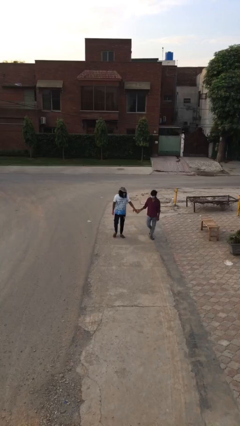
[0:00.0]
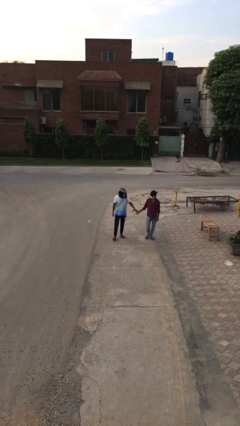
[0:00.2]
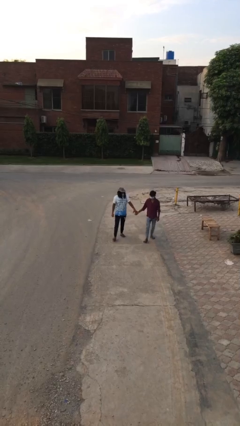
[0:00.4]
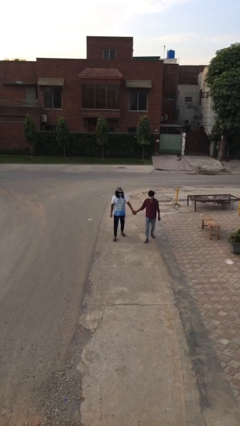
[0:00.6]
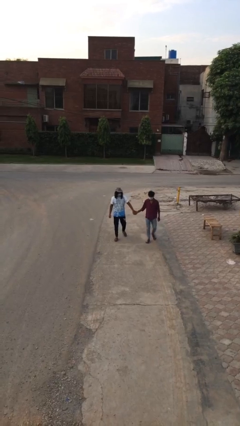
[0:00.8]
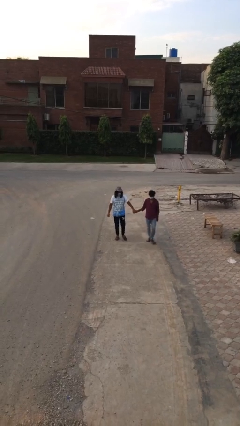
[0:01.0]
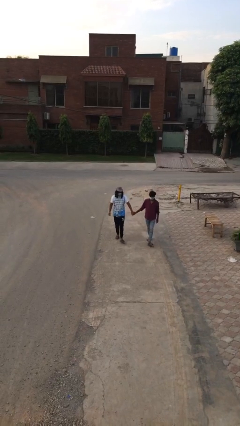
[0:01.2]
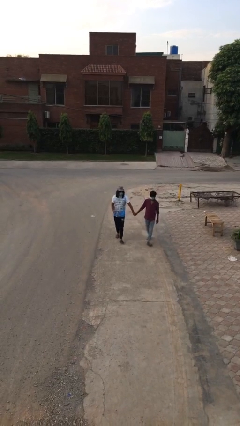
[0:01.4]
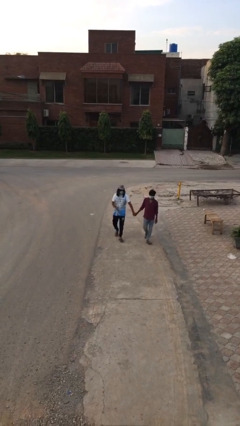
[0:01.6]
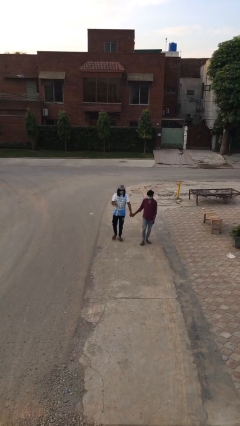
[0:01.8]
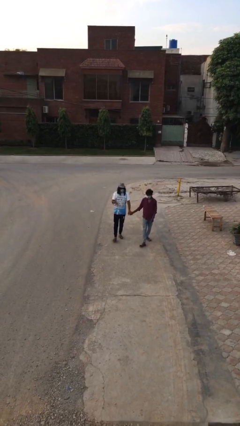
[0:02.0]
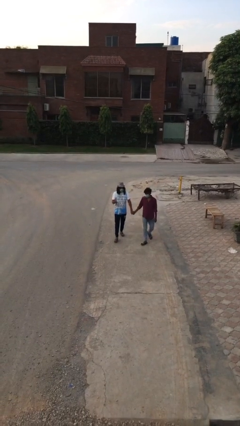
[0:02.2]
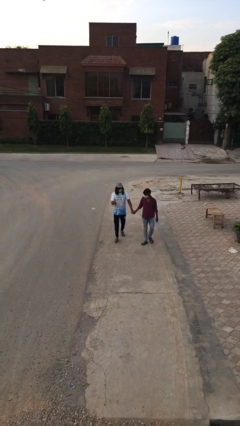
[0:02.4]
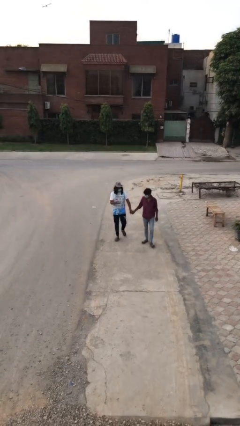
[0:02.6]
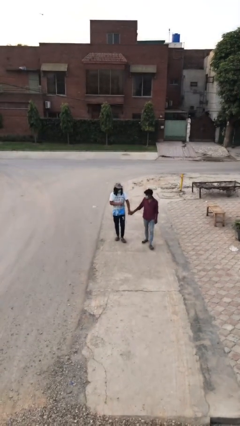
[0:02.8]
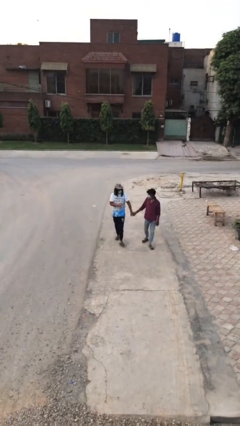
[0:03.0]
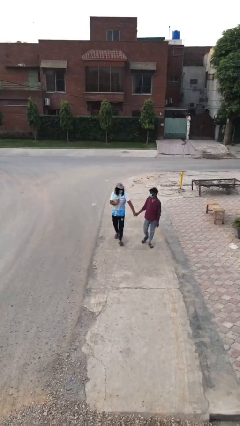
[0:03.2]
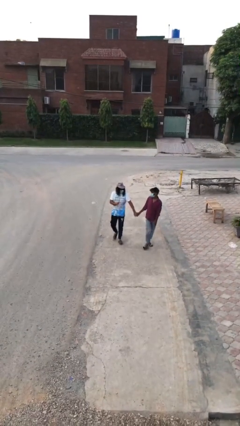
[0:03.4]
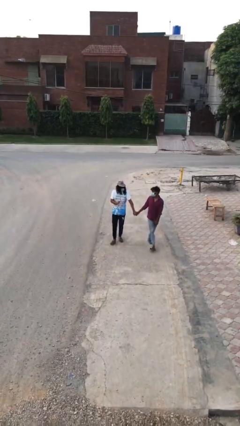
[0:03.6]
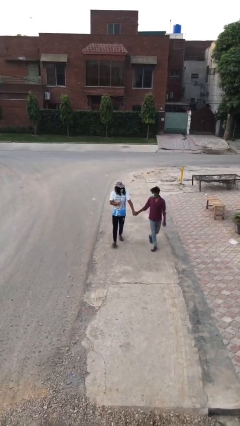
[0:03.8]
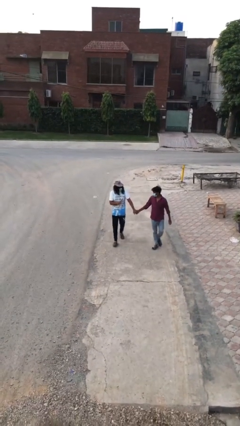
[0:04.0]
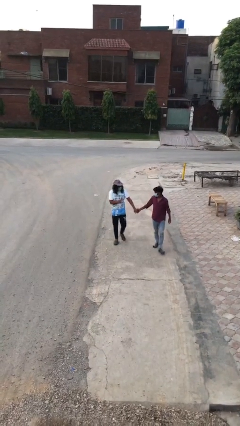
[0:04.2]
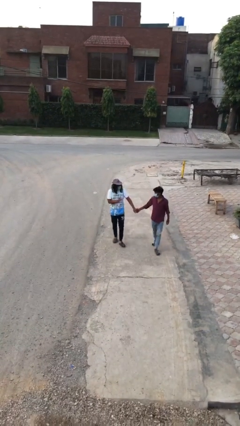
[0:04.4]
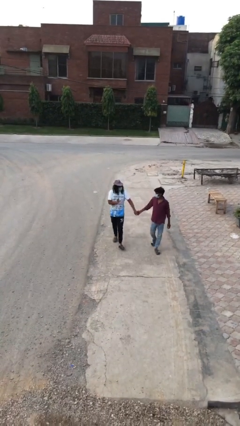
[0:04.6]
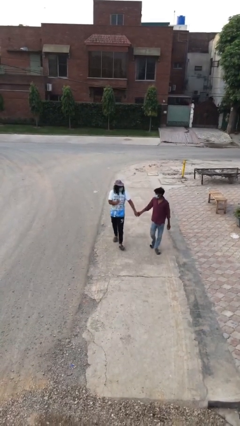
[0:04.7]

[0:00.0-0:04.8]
person holds hand

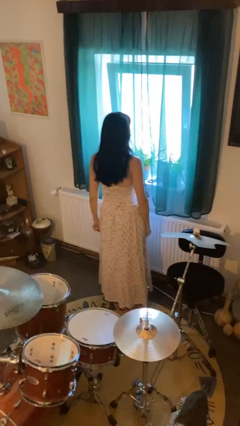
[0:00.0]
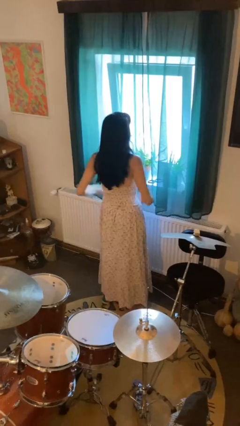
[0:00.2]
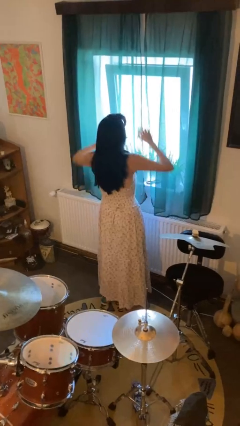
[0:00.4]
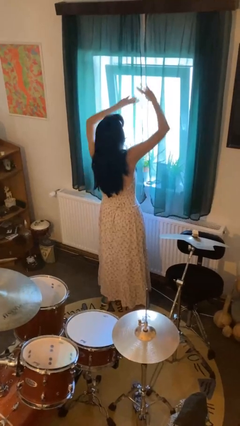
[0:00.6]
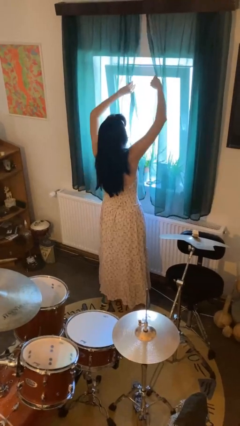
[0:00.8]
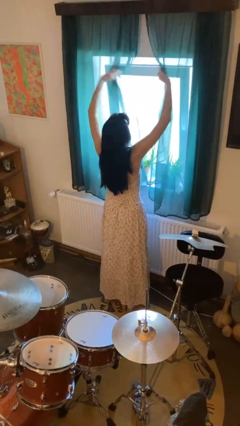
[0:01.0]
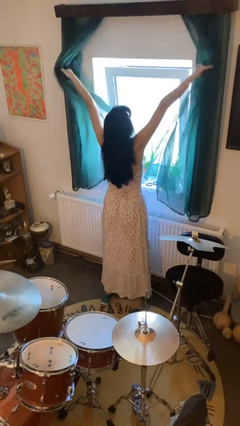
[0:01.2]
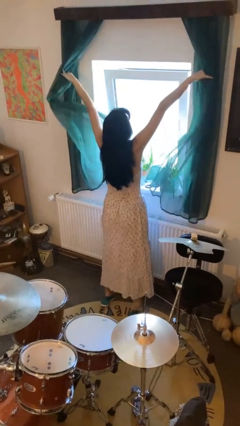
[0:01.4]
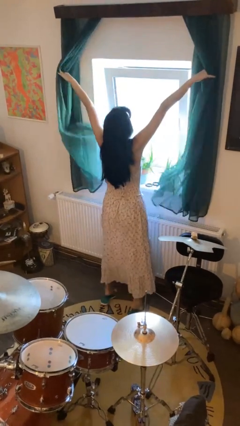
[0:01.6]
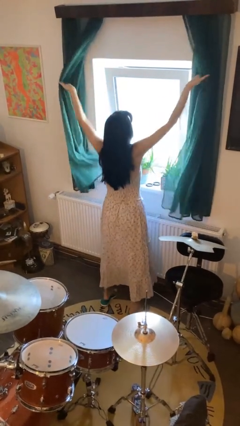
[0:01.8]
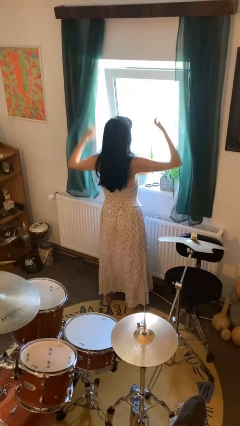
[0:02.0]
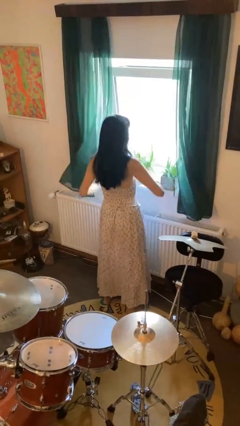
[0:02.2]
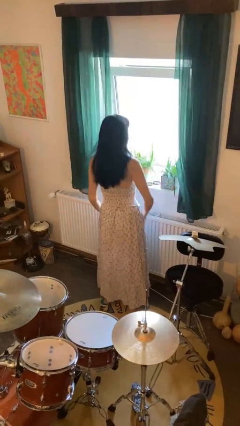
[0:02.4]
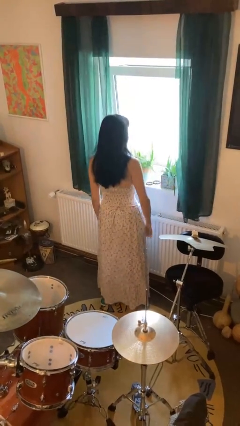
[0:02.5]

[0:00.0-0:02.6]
person opens curtains

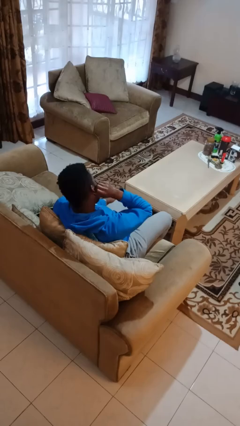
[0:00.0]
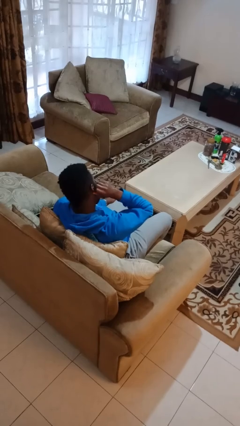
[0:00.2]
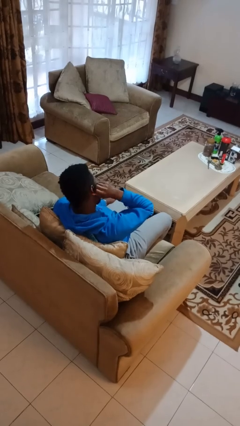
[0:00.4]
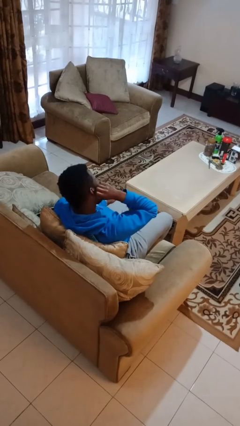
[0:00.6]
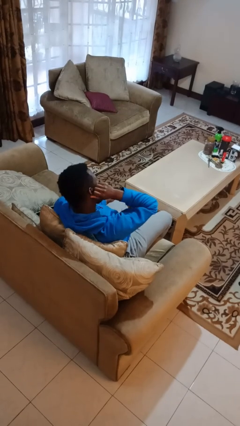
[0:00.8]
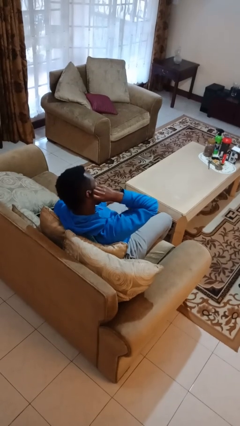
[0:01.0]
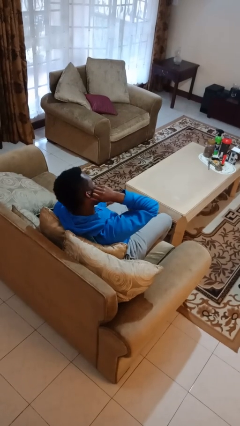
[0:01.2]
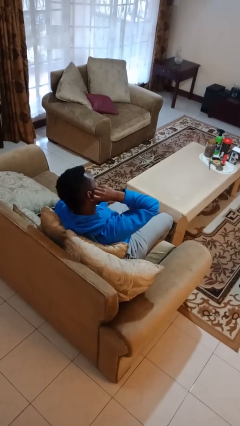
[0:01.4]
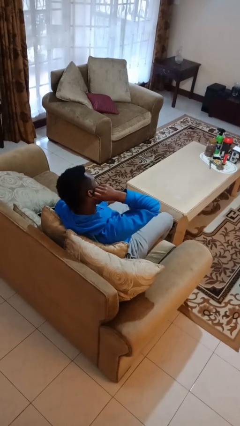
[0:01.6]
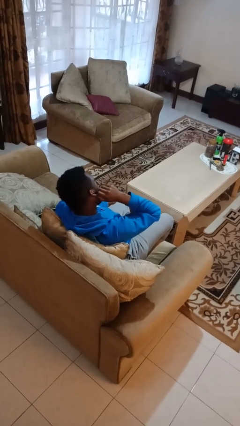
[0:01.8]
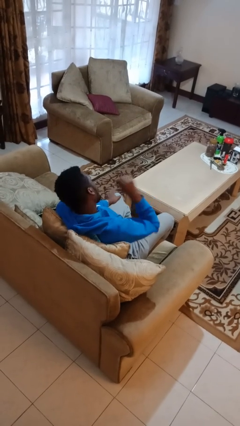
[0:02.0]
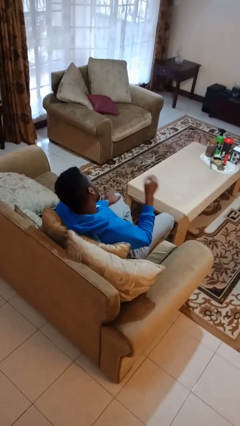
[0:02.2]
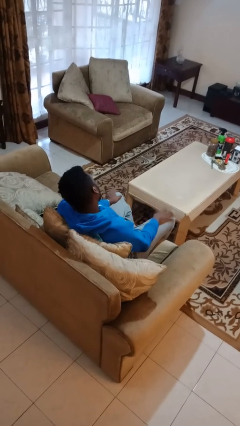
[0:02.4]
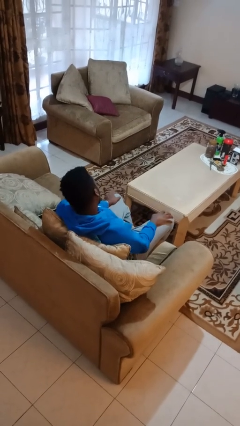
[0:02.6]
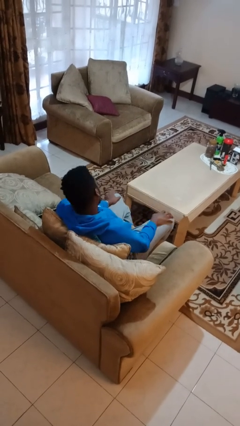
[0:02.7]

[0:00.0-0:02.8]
person touches earlobe

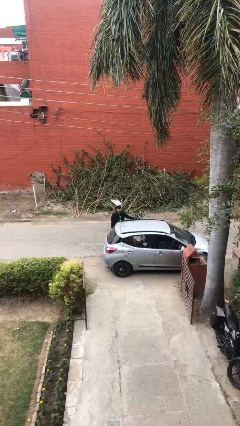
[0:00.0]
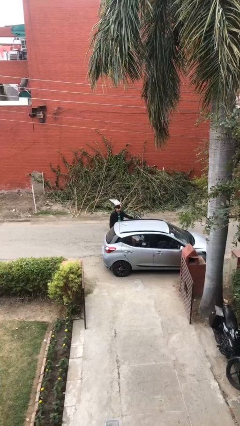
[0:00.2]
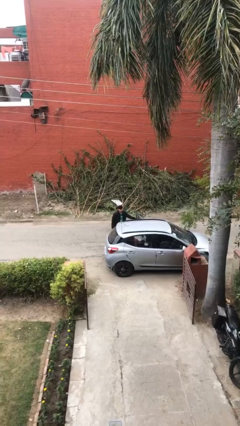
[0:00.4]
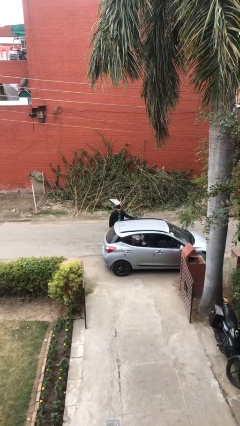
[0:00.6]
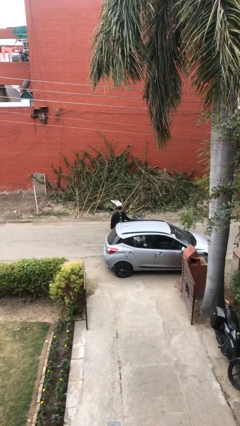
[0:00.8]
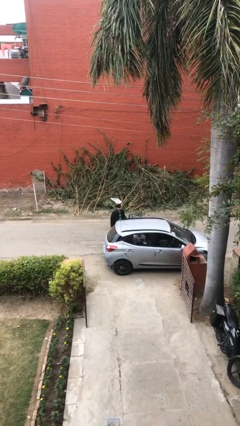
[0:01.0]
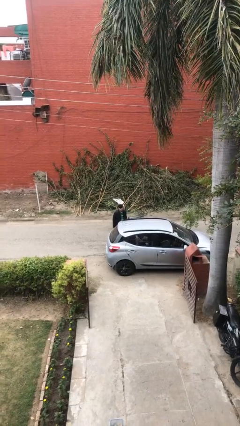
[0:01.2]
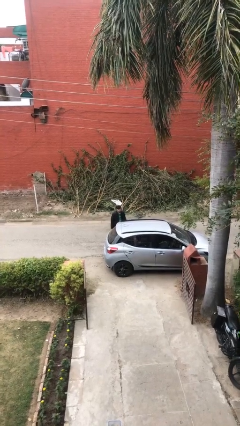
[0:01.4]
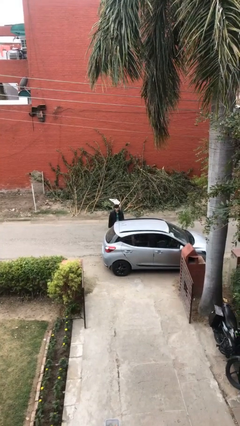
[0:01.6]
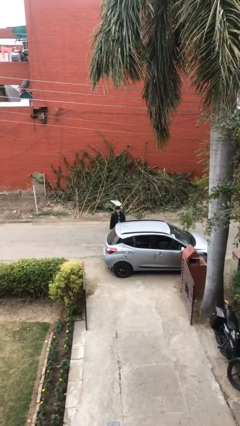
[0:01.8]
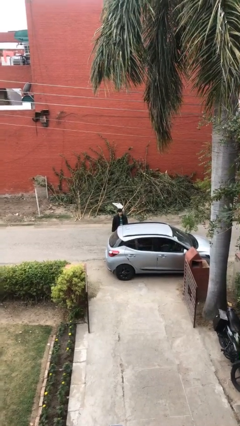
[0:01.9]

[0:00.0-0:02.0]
person closes car door

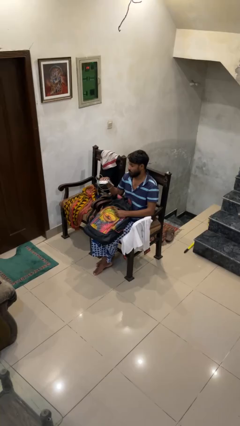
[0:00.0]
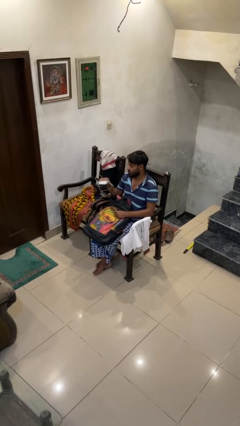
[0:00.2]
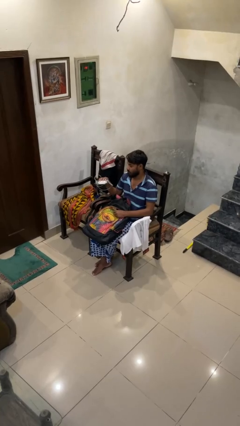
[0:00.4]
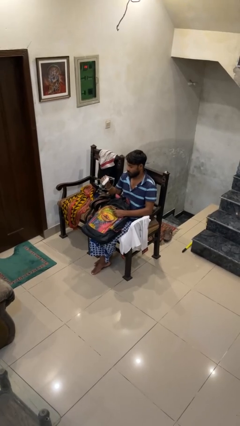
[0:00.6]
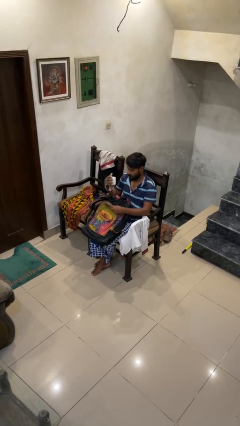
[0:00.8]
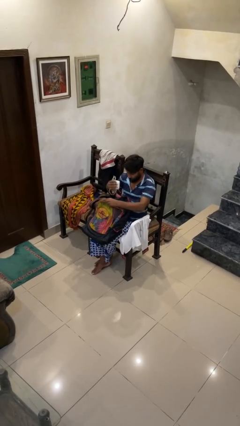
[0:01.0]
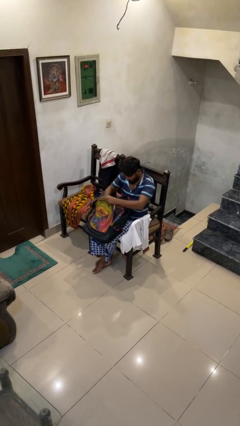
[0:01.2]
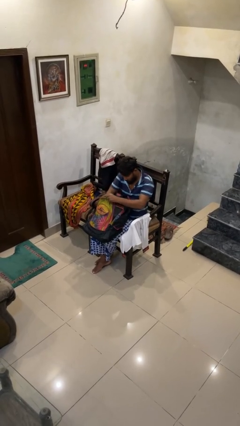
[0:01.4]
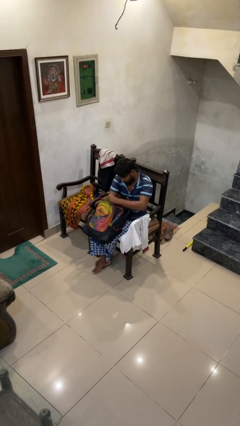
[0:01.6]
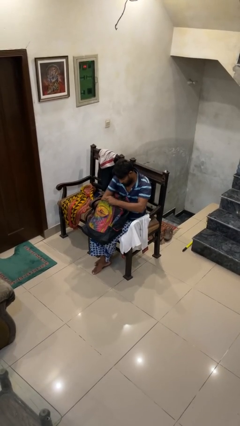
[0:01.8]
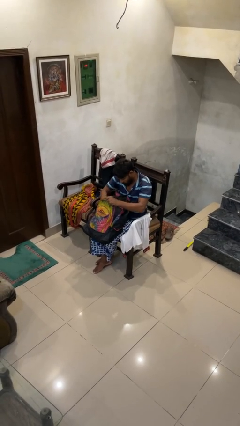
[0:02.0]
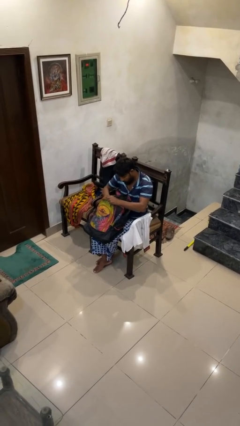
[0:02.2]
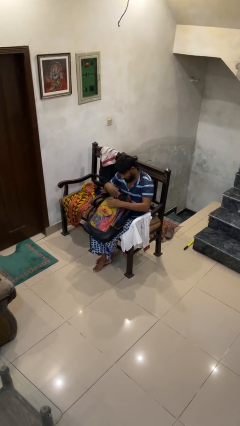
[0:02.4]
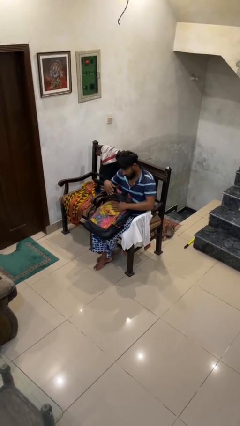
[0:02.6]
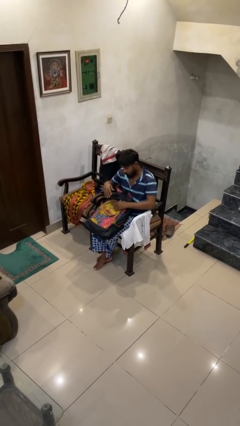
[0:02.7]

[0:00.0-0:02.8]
person puts object into backpack

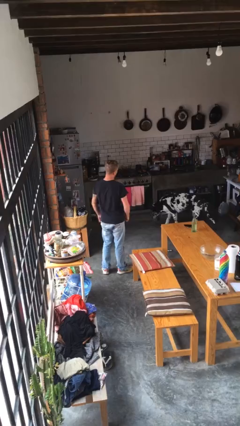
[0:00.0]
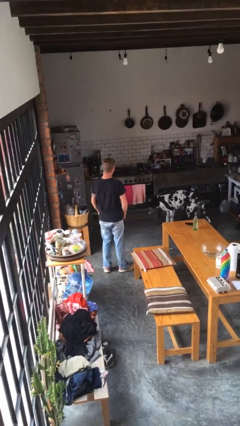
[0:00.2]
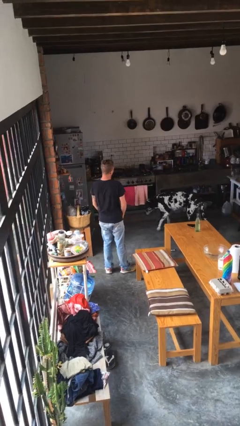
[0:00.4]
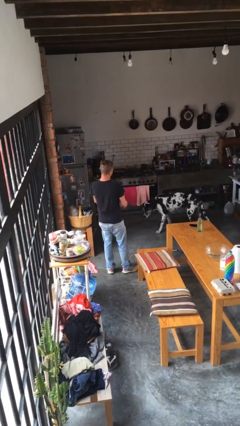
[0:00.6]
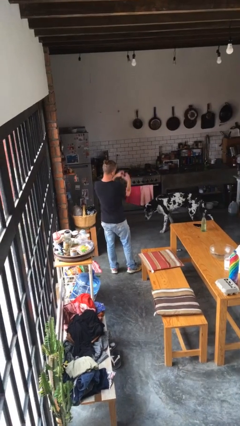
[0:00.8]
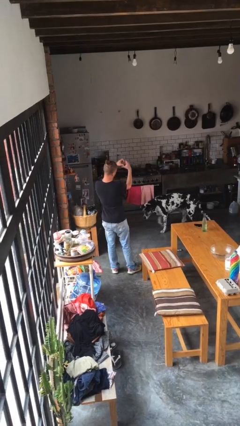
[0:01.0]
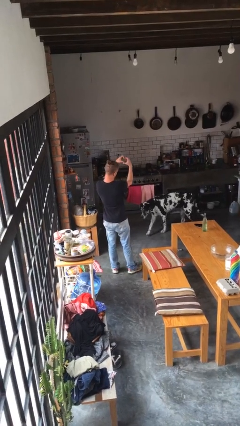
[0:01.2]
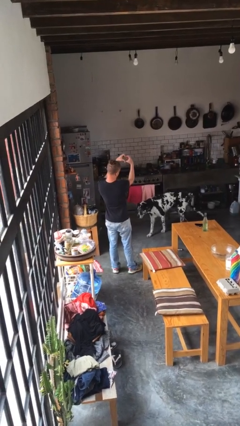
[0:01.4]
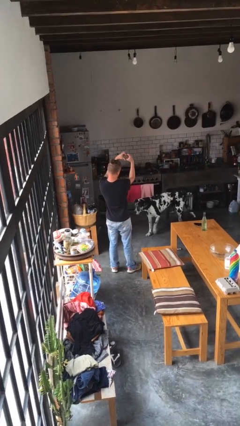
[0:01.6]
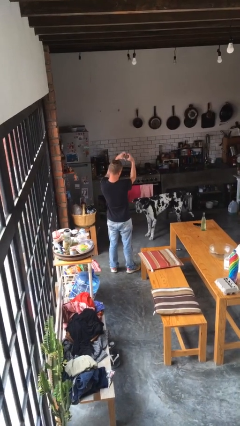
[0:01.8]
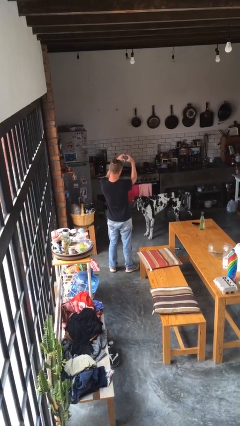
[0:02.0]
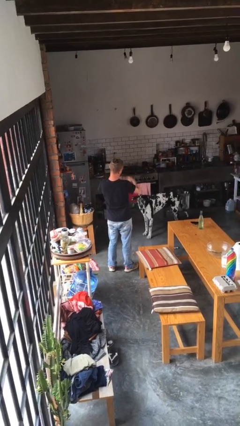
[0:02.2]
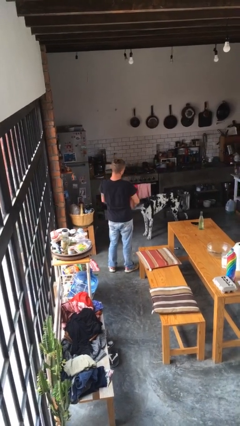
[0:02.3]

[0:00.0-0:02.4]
person gestures heart
